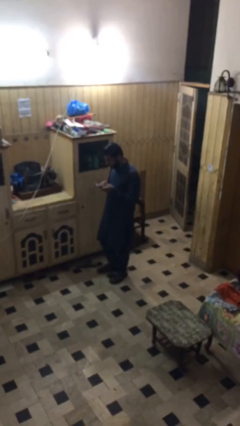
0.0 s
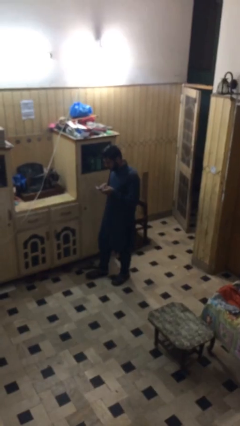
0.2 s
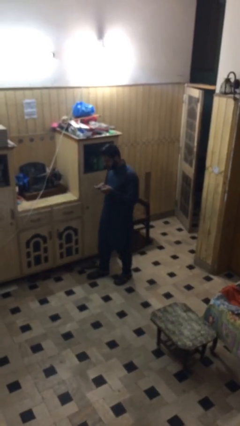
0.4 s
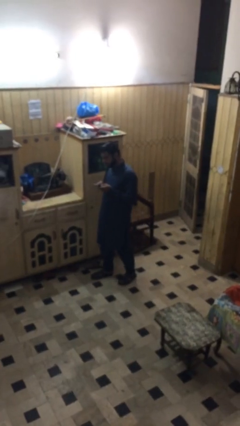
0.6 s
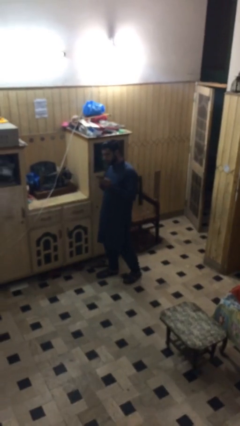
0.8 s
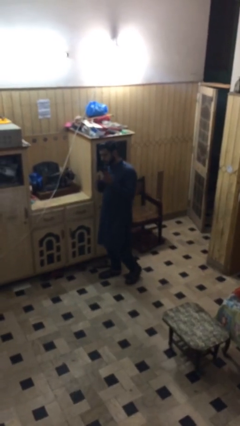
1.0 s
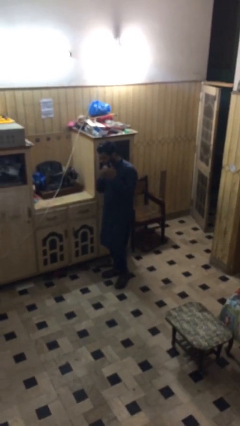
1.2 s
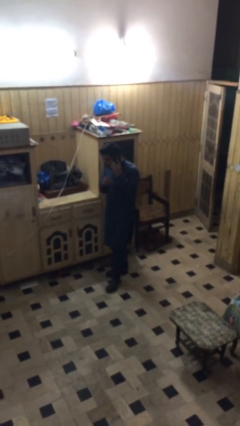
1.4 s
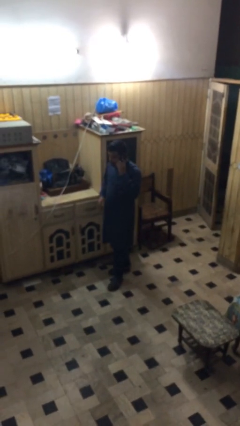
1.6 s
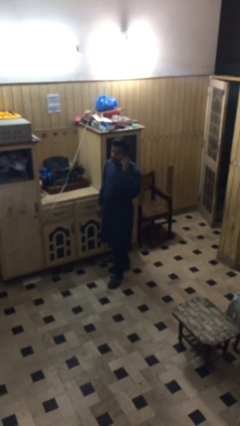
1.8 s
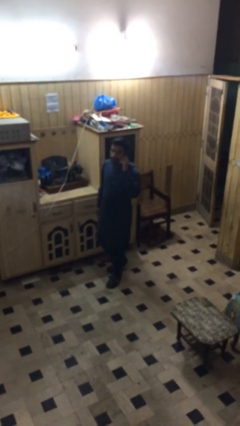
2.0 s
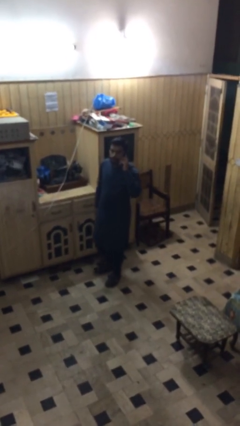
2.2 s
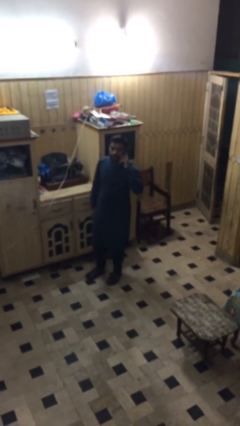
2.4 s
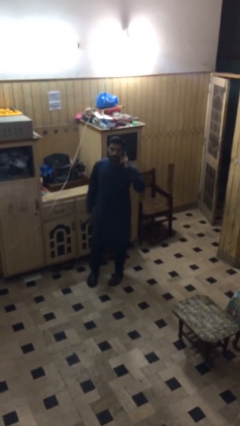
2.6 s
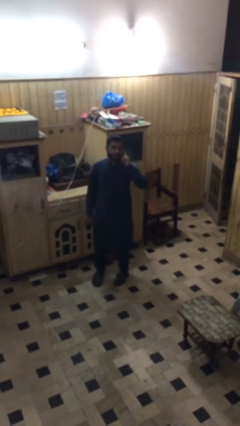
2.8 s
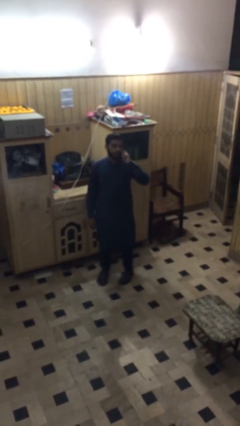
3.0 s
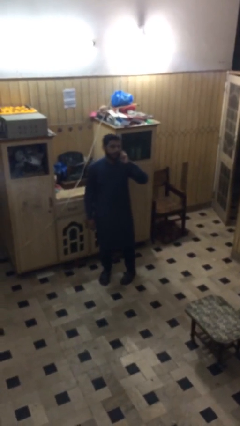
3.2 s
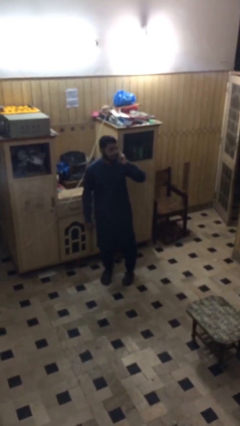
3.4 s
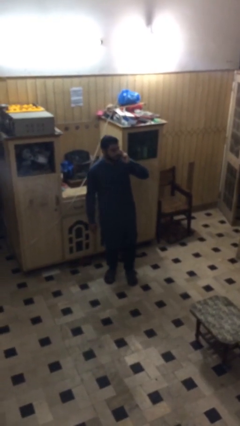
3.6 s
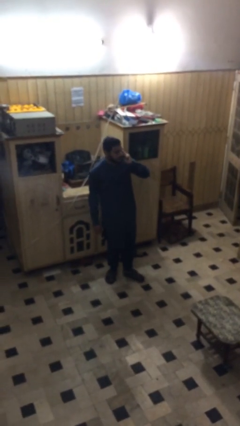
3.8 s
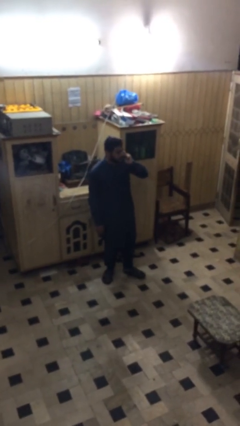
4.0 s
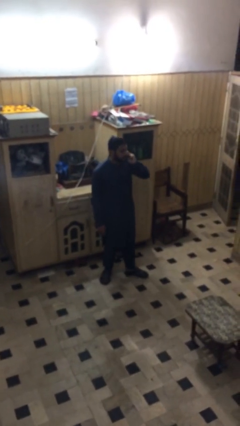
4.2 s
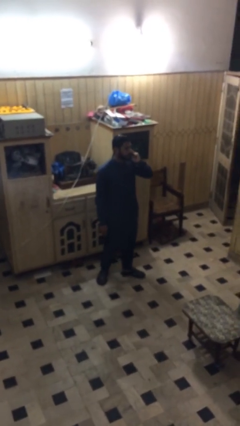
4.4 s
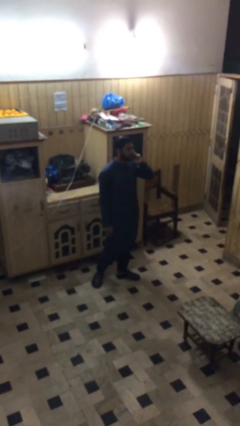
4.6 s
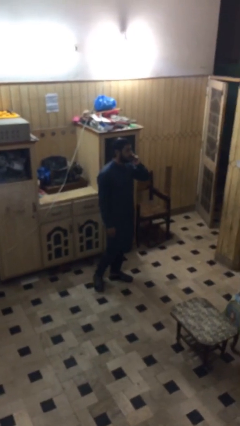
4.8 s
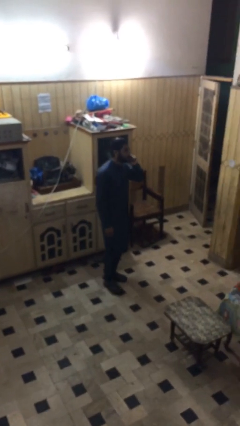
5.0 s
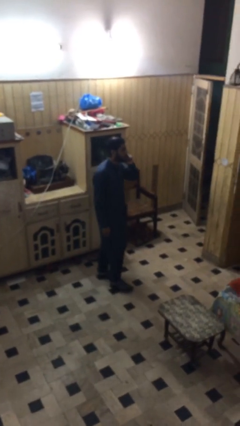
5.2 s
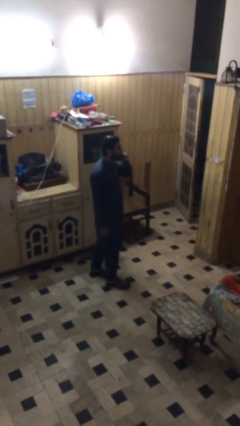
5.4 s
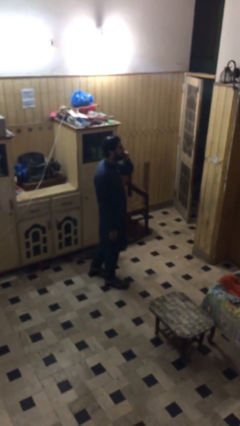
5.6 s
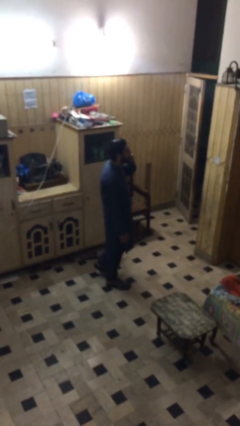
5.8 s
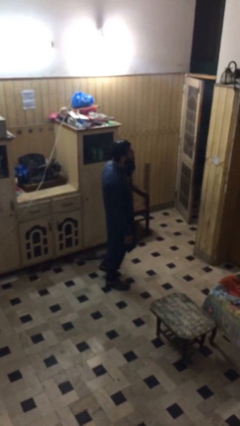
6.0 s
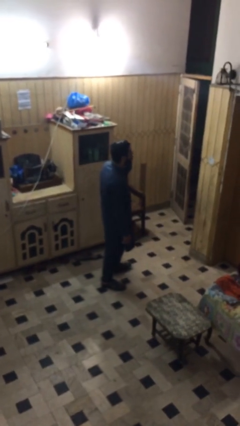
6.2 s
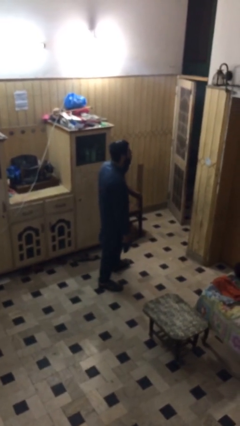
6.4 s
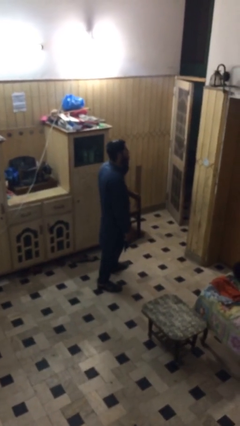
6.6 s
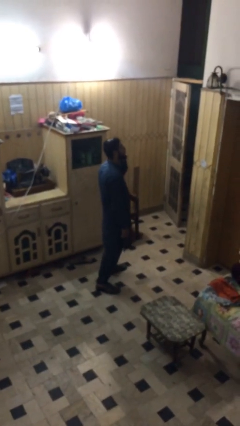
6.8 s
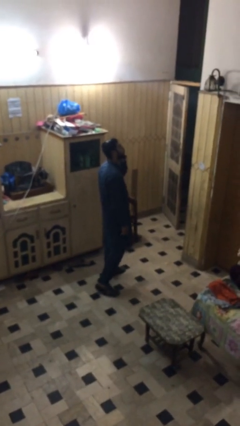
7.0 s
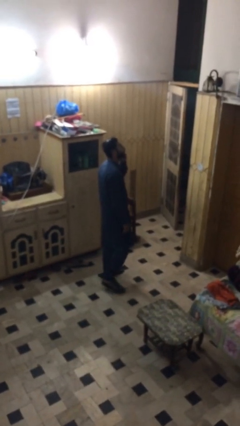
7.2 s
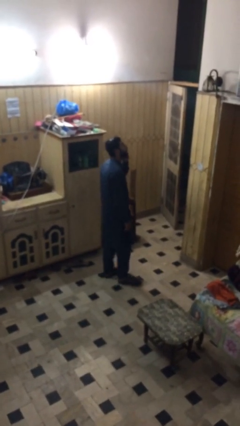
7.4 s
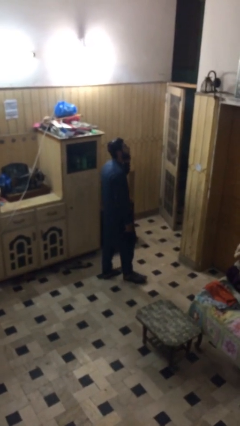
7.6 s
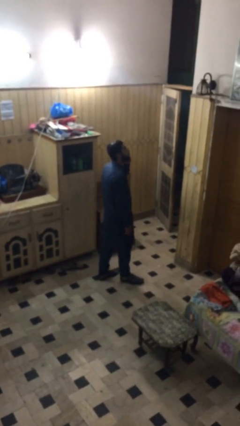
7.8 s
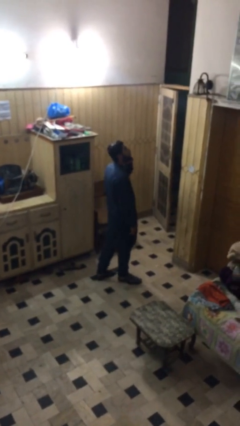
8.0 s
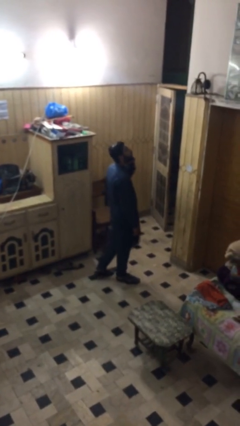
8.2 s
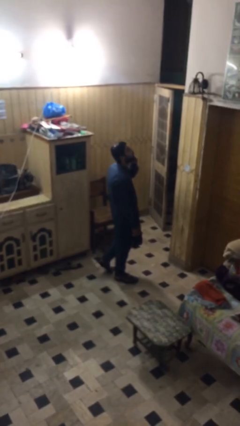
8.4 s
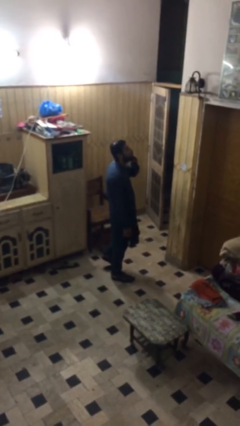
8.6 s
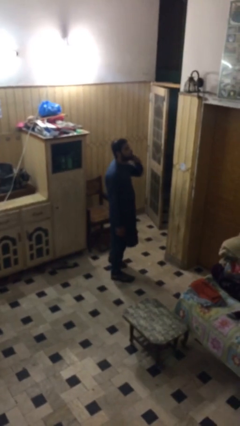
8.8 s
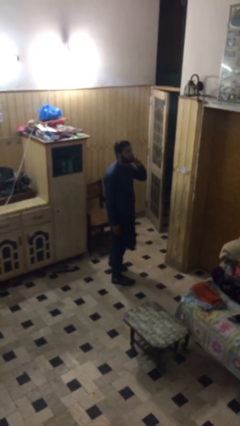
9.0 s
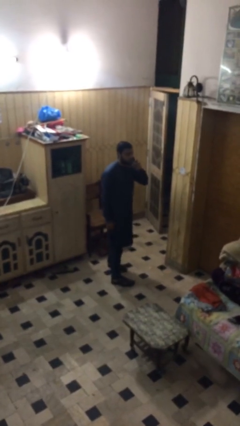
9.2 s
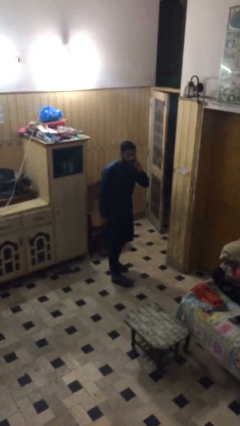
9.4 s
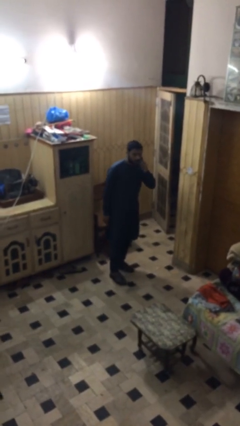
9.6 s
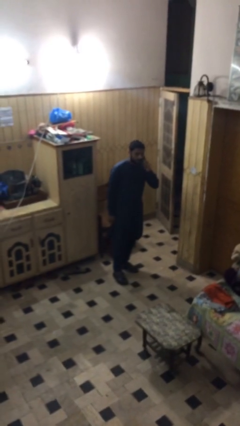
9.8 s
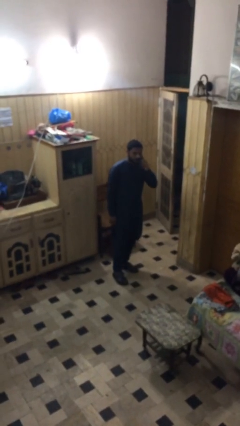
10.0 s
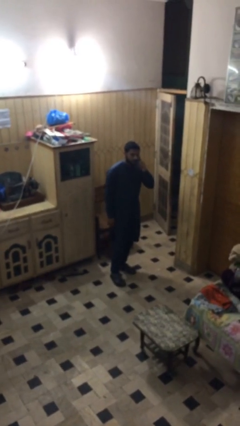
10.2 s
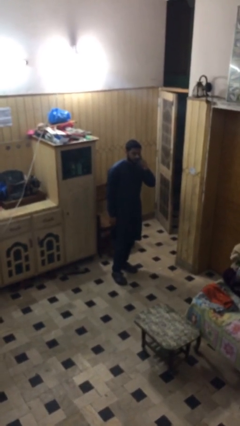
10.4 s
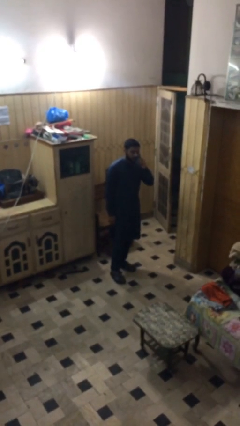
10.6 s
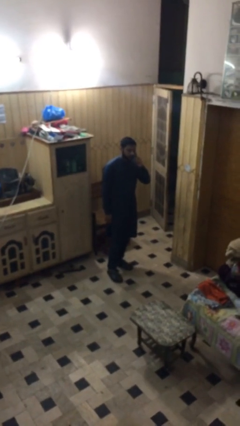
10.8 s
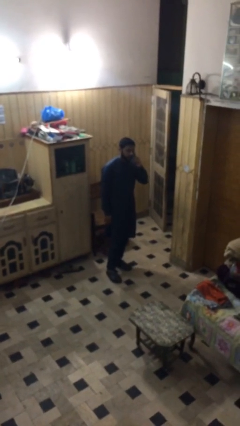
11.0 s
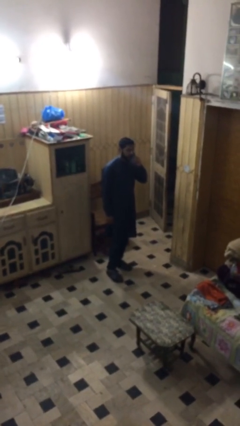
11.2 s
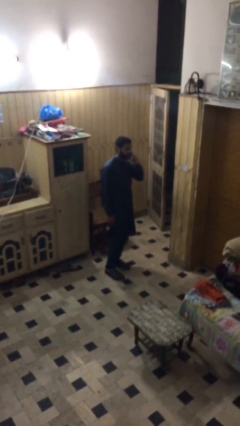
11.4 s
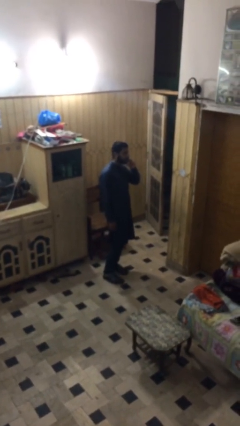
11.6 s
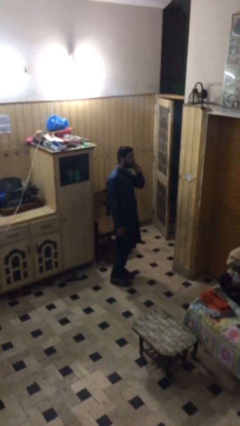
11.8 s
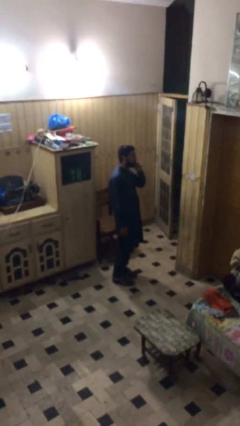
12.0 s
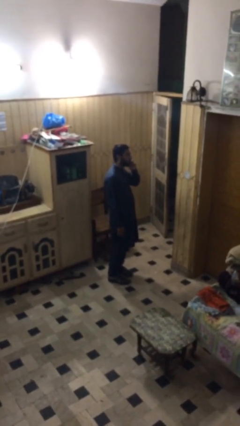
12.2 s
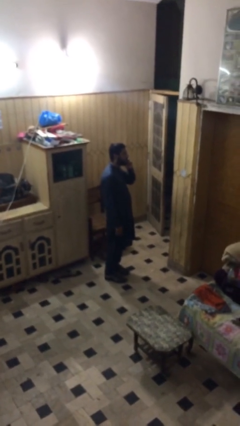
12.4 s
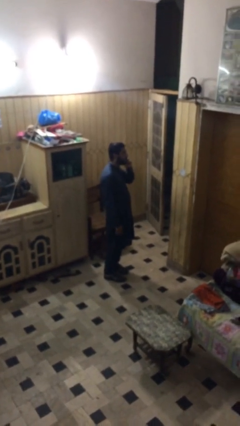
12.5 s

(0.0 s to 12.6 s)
person talks on phone

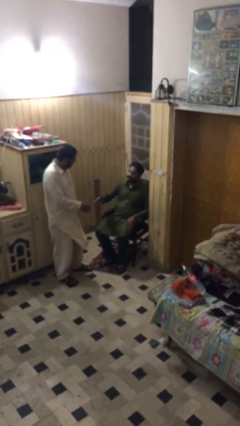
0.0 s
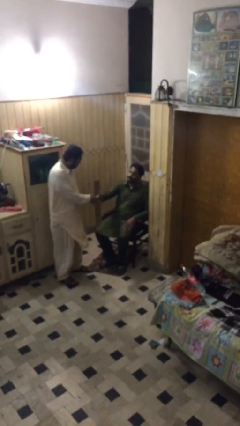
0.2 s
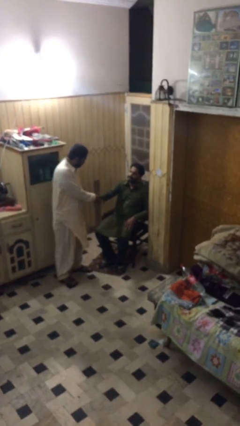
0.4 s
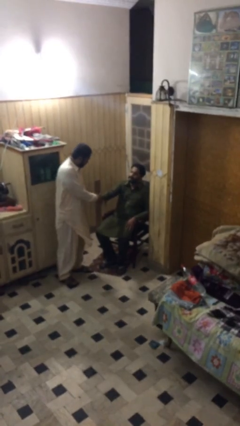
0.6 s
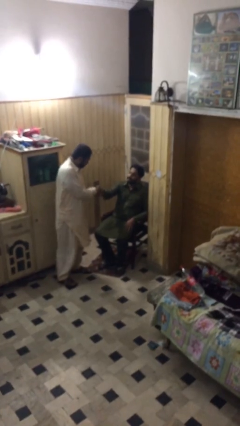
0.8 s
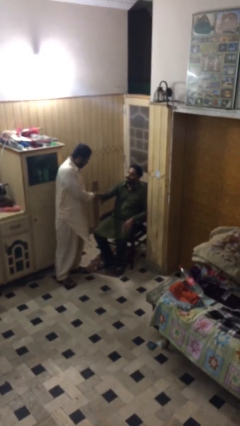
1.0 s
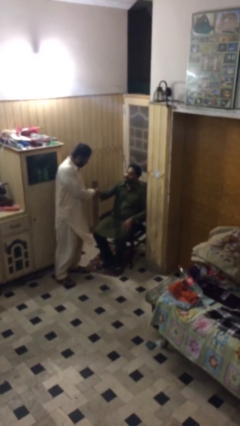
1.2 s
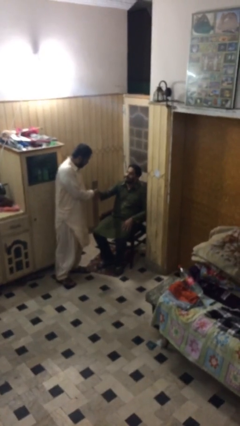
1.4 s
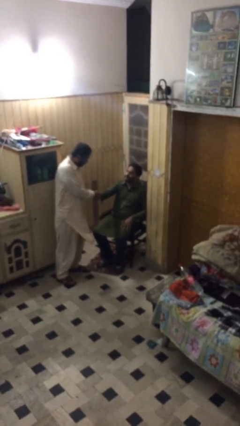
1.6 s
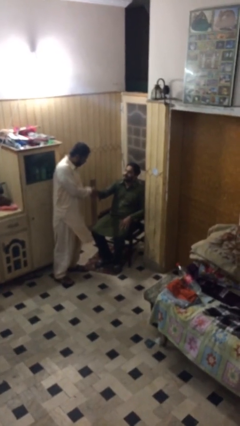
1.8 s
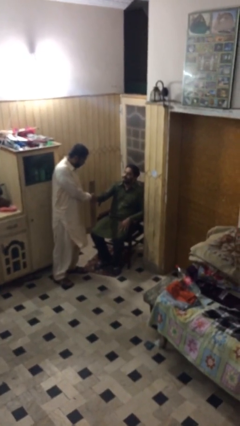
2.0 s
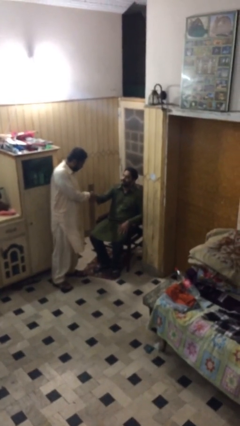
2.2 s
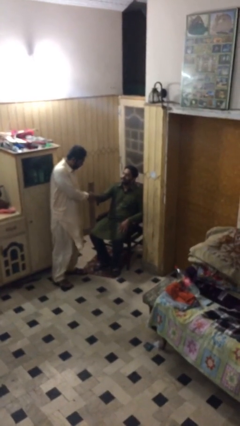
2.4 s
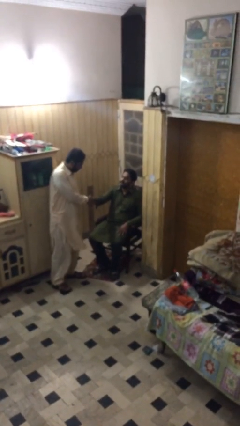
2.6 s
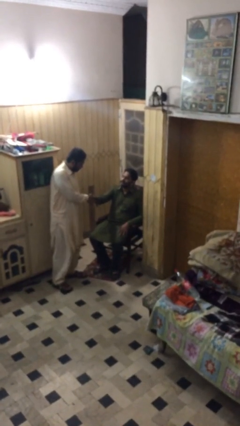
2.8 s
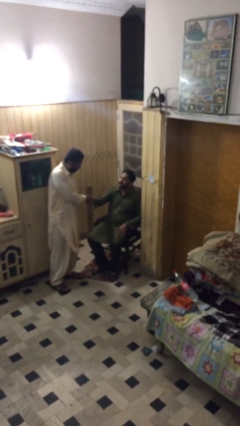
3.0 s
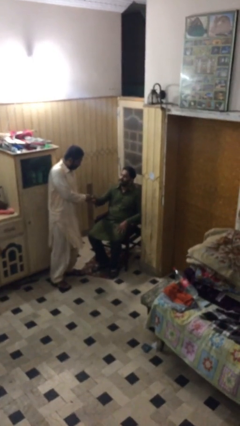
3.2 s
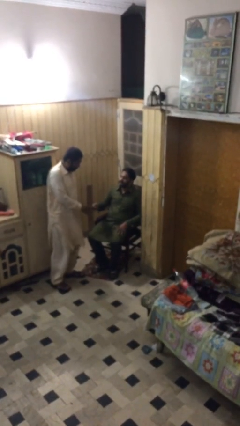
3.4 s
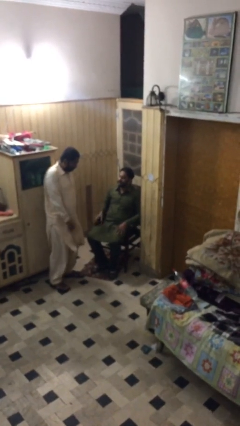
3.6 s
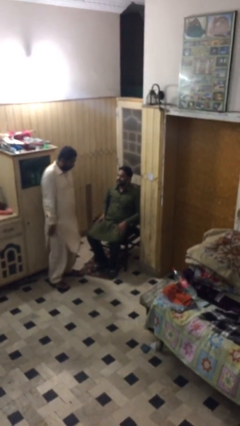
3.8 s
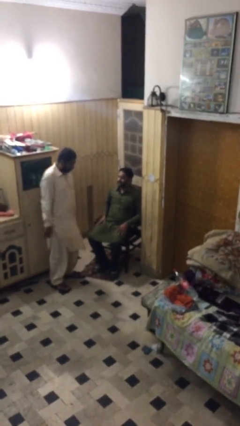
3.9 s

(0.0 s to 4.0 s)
person shakes hand

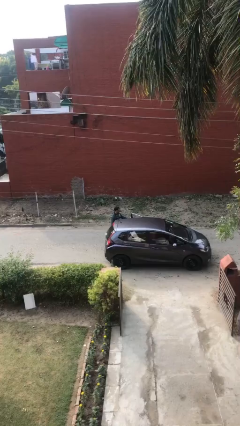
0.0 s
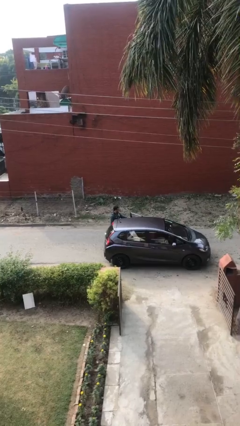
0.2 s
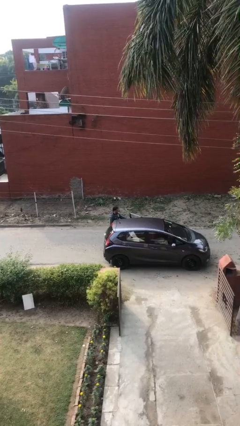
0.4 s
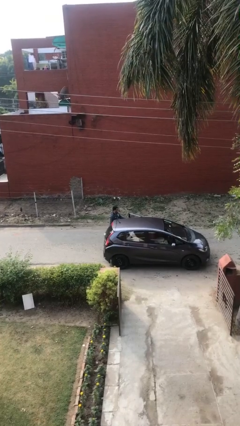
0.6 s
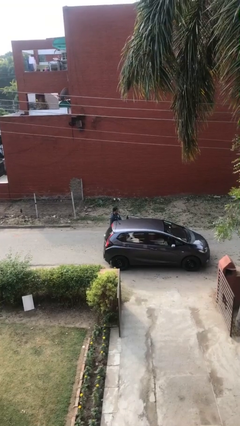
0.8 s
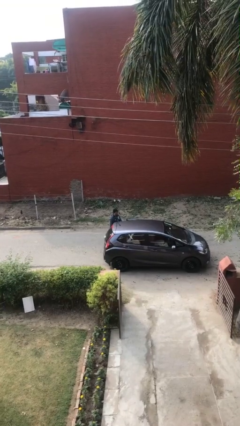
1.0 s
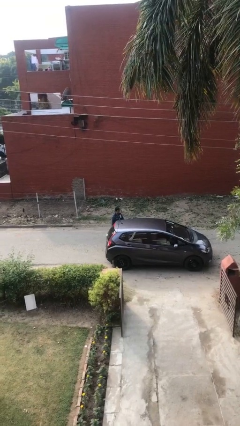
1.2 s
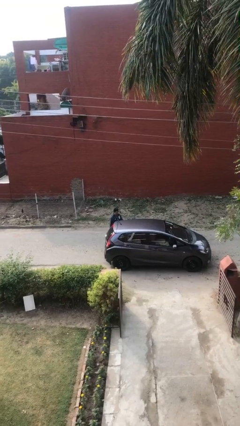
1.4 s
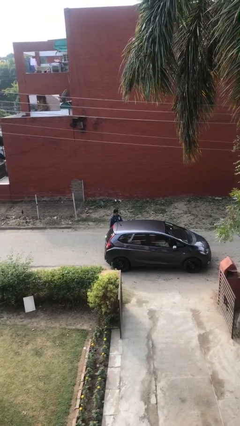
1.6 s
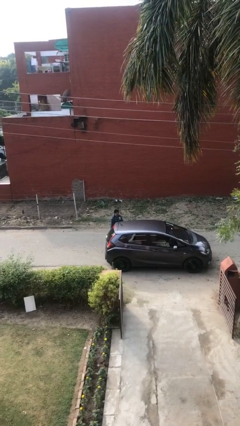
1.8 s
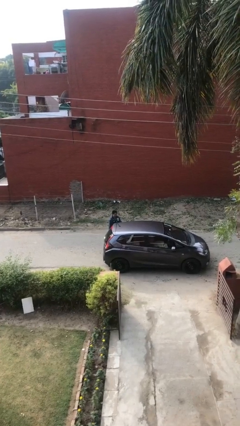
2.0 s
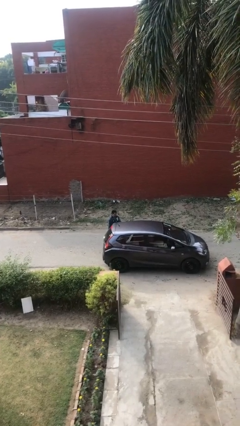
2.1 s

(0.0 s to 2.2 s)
person closes car door
